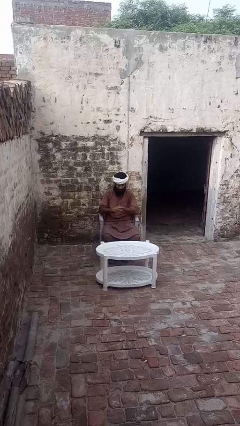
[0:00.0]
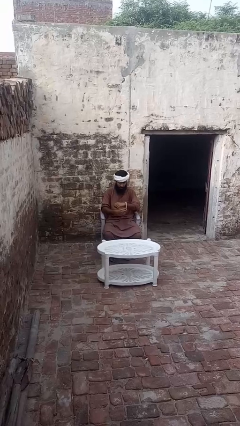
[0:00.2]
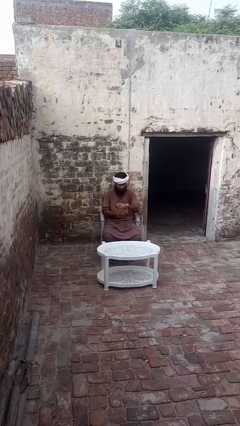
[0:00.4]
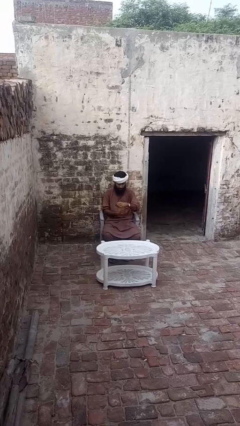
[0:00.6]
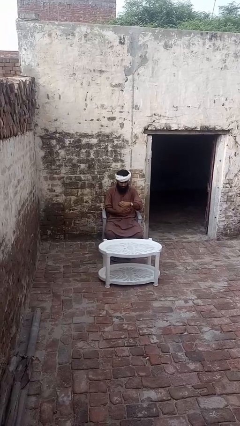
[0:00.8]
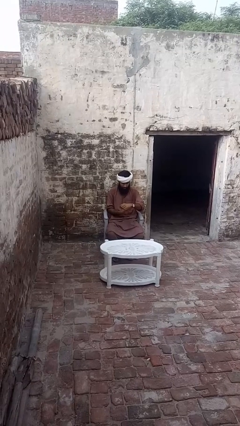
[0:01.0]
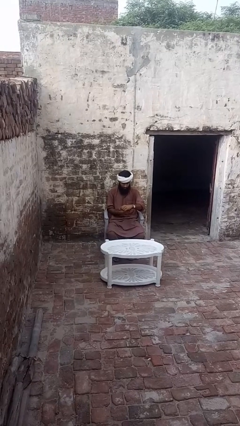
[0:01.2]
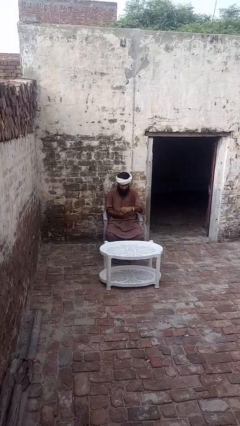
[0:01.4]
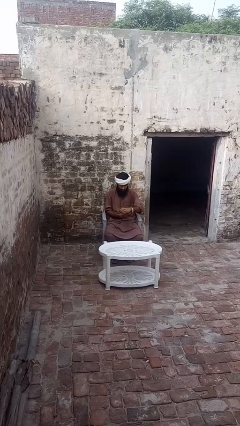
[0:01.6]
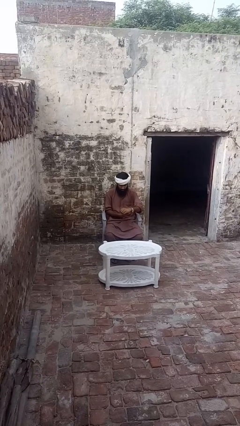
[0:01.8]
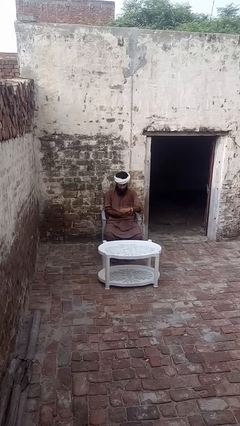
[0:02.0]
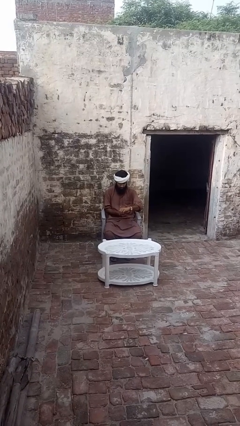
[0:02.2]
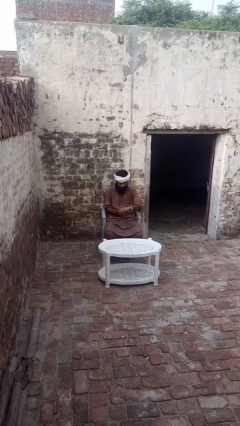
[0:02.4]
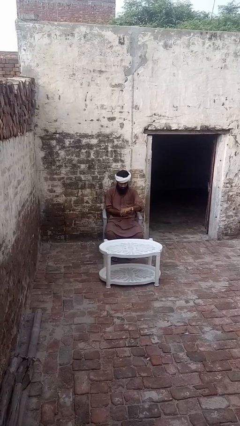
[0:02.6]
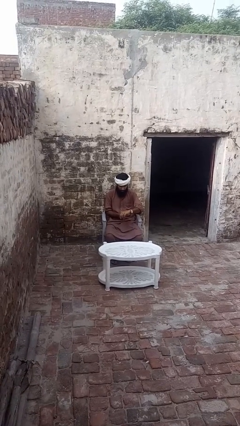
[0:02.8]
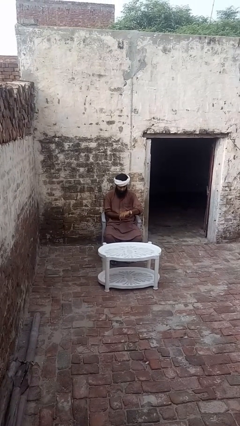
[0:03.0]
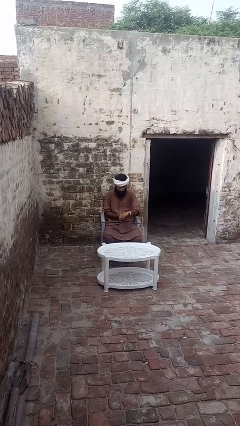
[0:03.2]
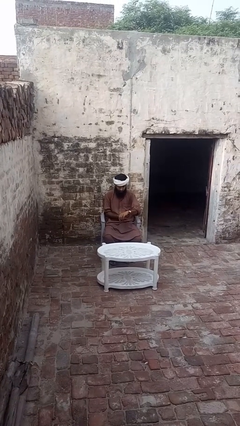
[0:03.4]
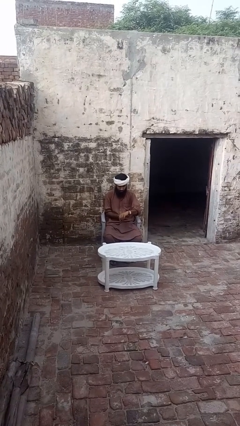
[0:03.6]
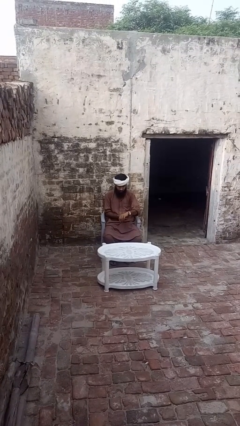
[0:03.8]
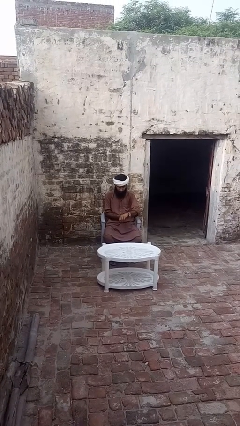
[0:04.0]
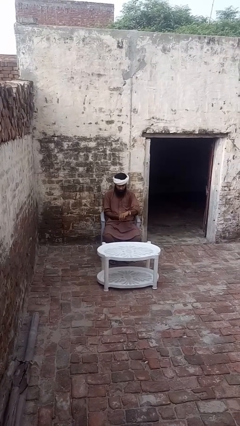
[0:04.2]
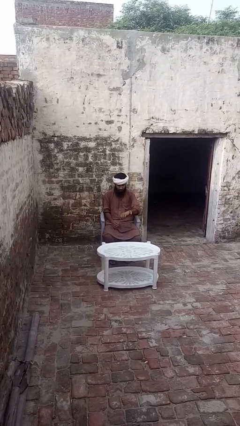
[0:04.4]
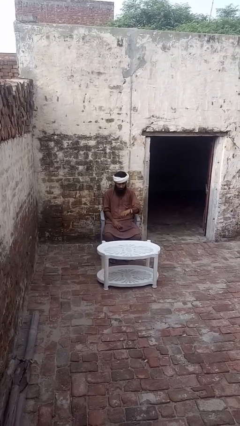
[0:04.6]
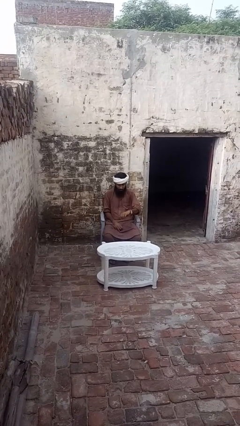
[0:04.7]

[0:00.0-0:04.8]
person puts on wristwatch

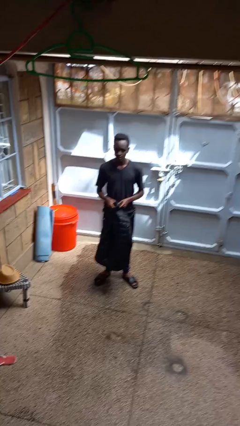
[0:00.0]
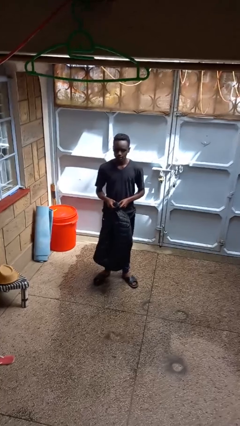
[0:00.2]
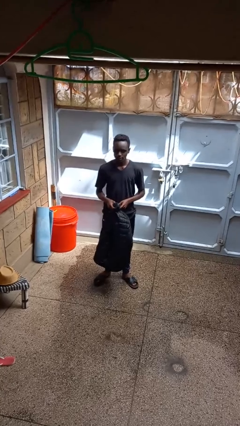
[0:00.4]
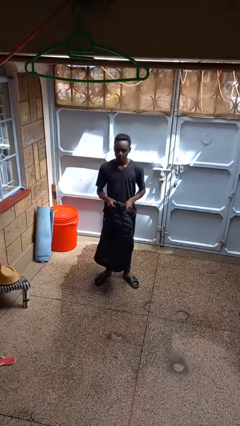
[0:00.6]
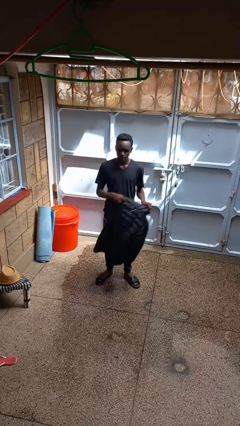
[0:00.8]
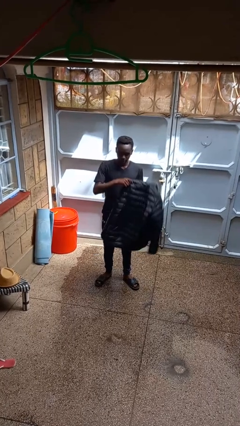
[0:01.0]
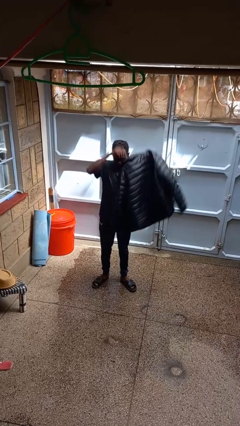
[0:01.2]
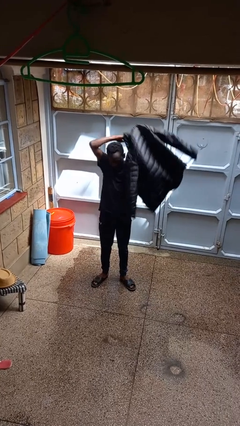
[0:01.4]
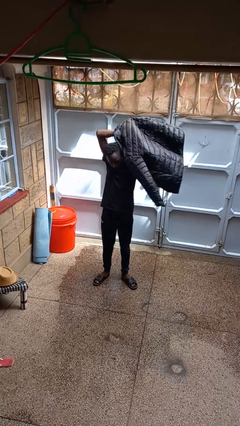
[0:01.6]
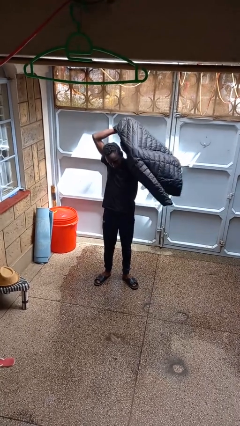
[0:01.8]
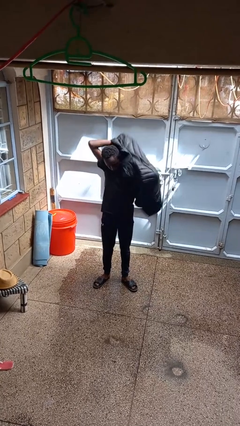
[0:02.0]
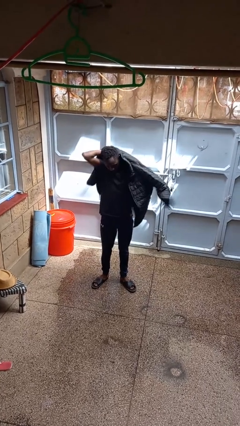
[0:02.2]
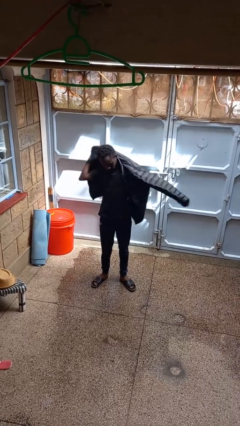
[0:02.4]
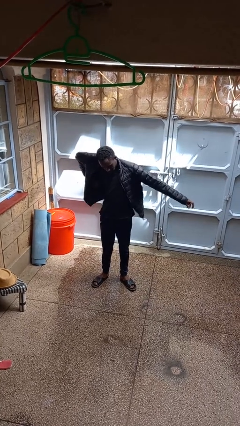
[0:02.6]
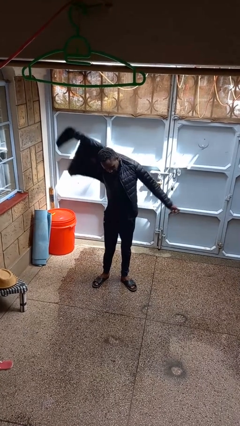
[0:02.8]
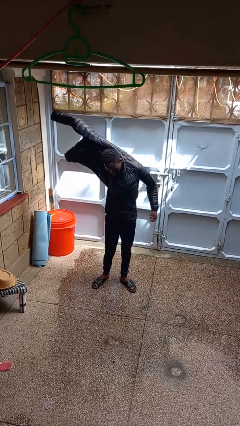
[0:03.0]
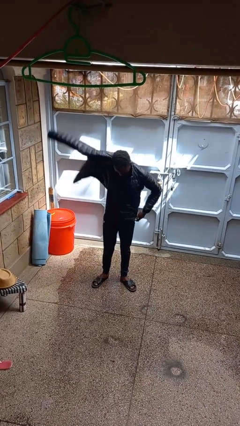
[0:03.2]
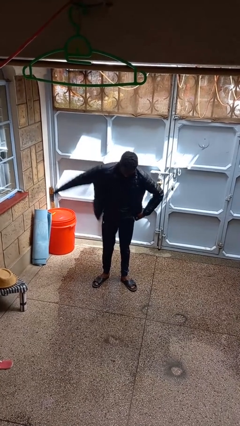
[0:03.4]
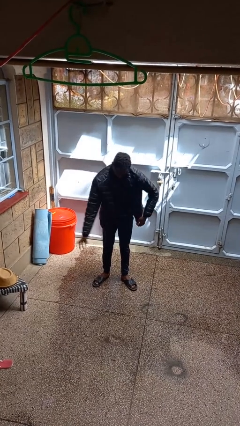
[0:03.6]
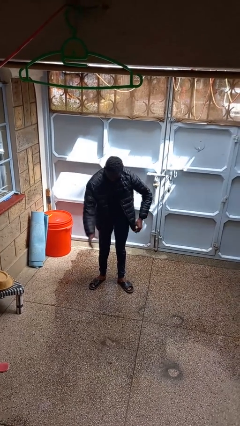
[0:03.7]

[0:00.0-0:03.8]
person puts on jacket

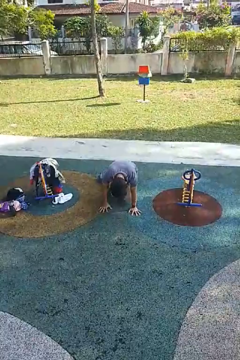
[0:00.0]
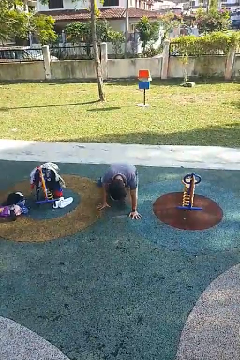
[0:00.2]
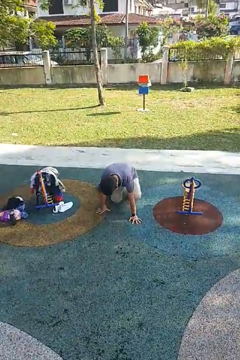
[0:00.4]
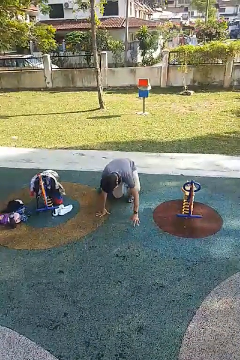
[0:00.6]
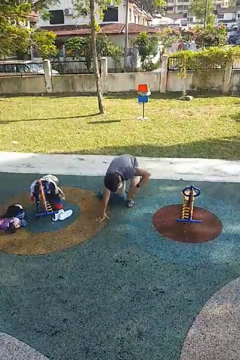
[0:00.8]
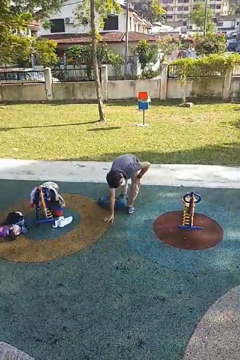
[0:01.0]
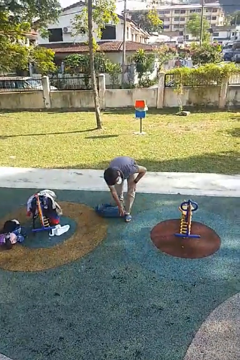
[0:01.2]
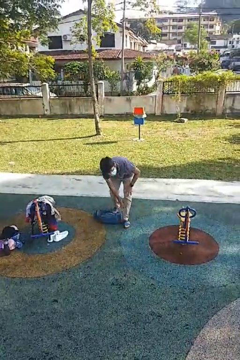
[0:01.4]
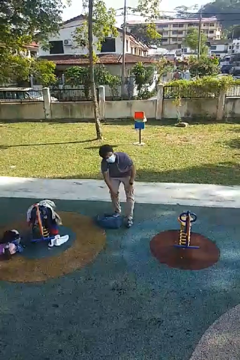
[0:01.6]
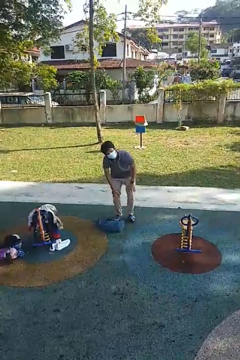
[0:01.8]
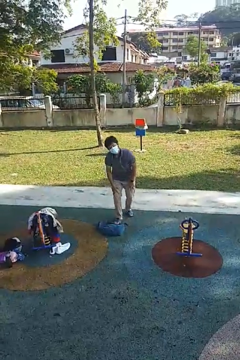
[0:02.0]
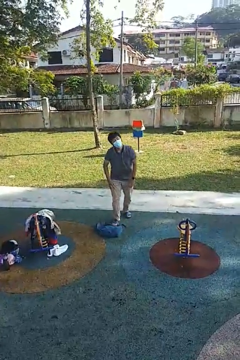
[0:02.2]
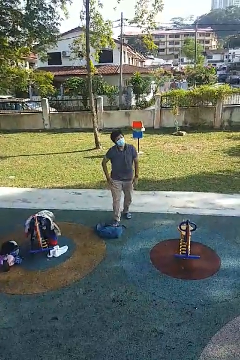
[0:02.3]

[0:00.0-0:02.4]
person stands up from floor

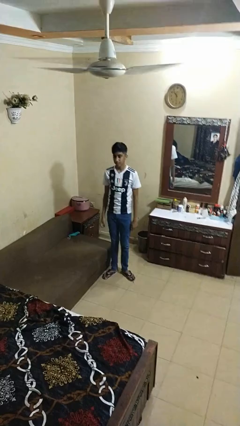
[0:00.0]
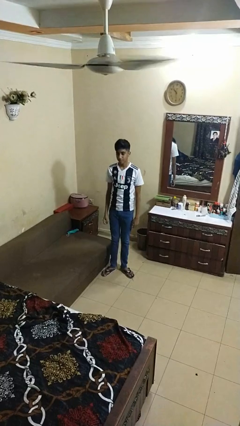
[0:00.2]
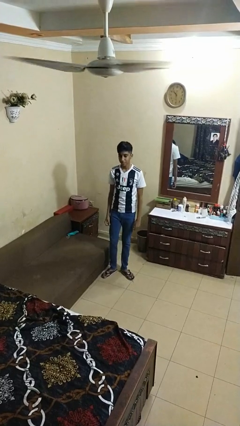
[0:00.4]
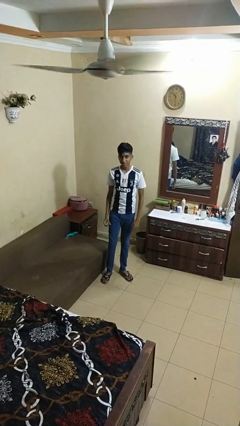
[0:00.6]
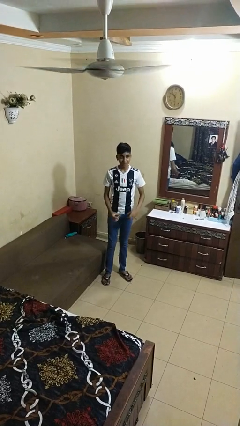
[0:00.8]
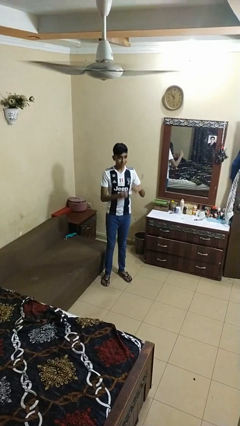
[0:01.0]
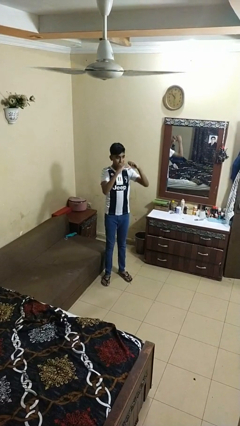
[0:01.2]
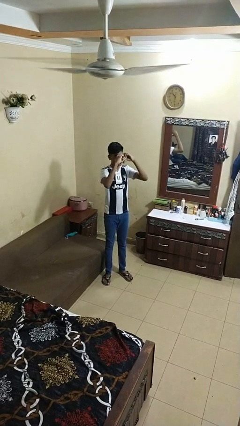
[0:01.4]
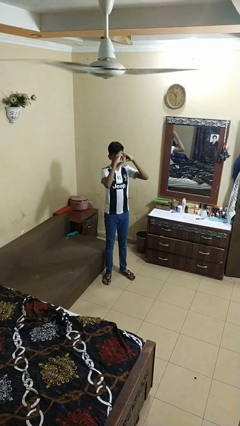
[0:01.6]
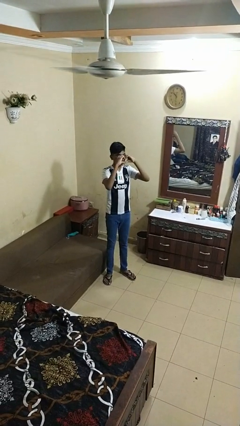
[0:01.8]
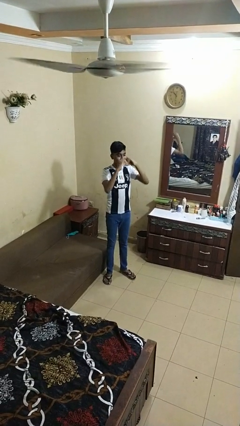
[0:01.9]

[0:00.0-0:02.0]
person gestures heart

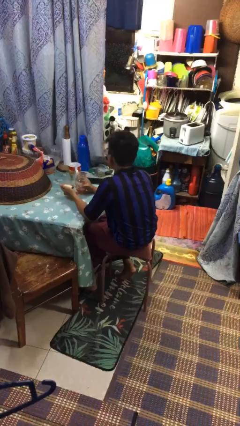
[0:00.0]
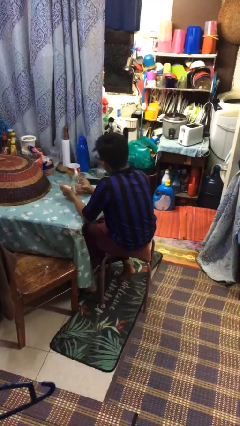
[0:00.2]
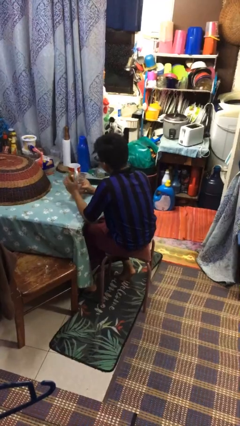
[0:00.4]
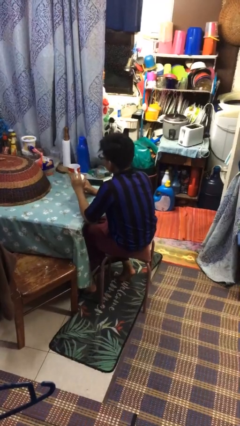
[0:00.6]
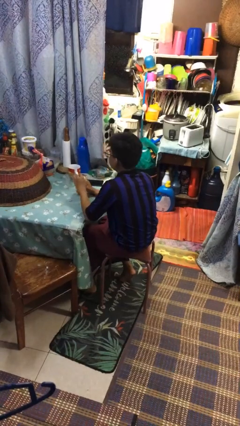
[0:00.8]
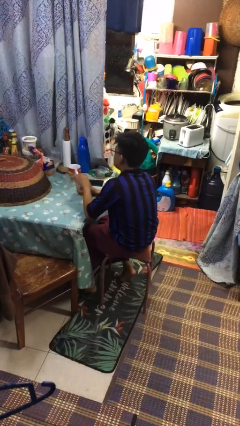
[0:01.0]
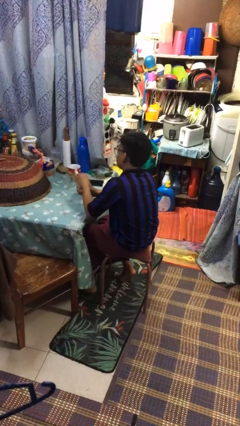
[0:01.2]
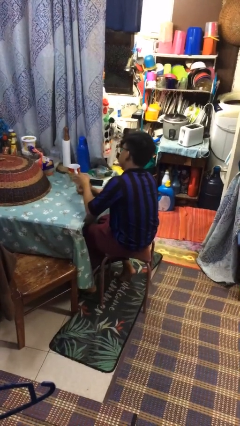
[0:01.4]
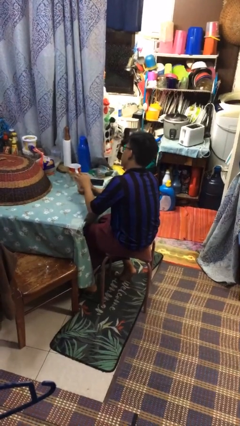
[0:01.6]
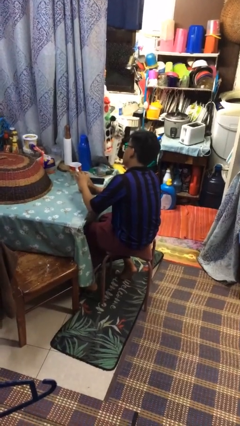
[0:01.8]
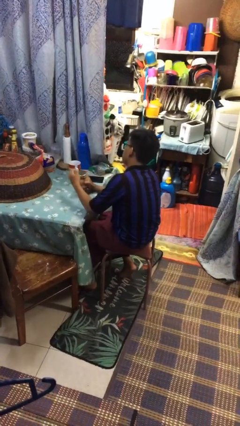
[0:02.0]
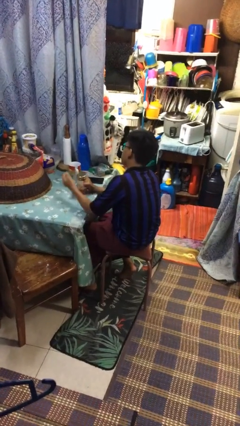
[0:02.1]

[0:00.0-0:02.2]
person closes jar

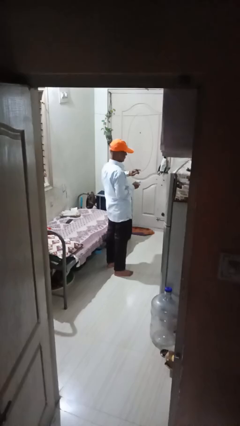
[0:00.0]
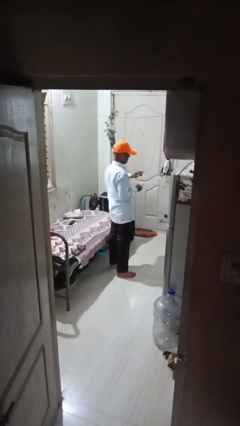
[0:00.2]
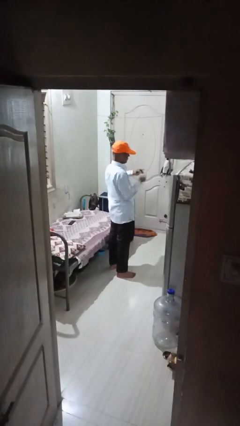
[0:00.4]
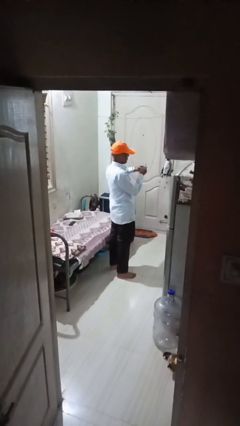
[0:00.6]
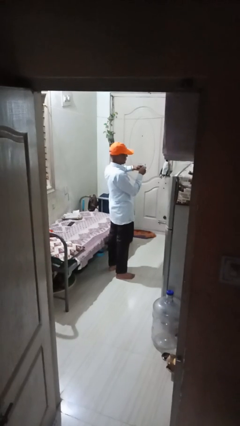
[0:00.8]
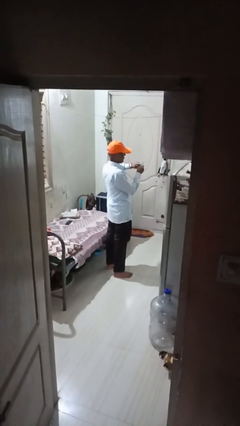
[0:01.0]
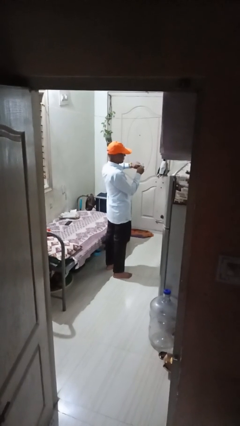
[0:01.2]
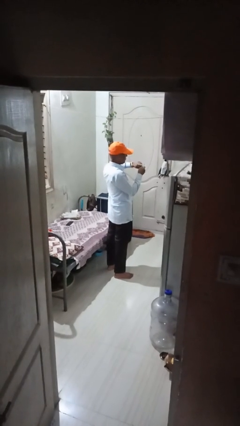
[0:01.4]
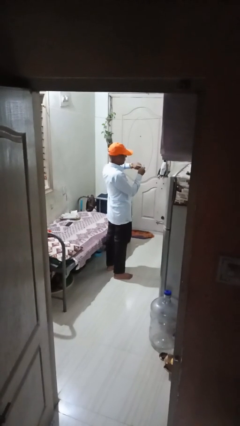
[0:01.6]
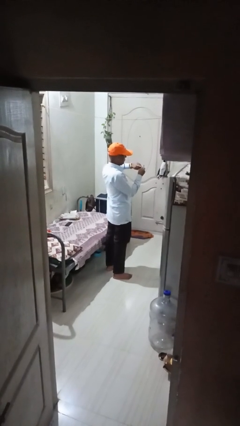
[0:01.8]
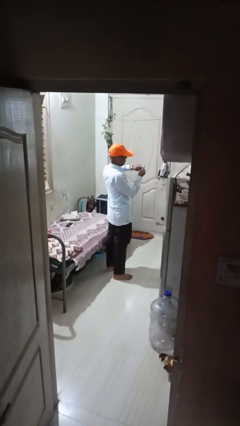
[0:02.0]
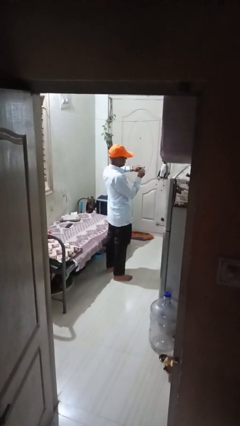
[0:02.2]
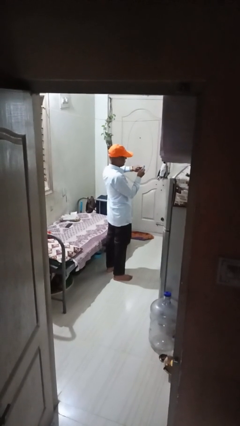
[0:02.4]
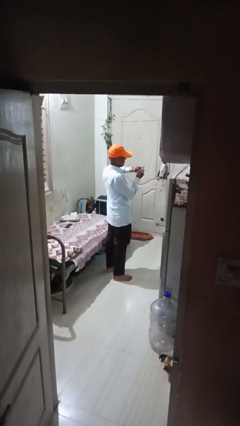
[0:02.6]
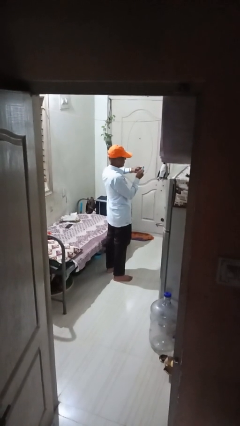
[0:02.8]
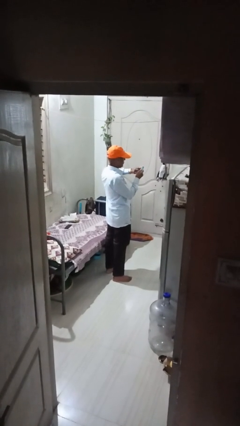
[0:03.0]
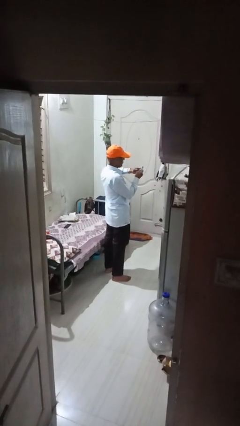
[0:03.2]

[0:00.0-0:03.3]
person files fingernails
